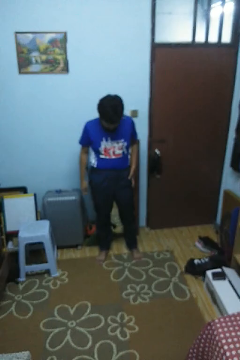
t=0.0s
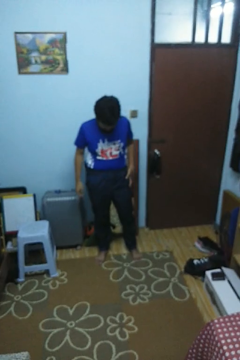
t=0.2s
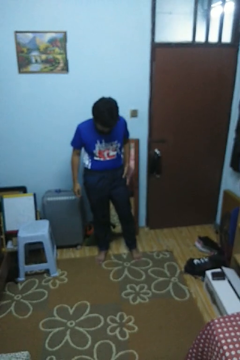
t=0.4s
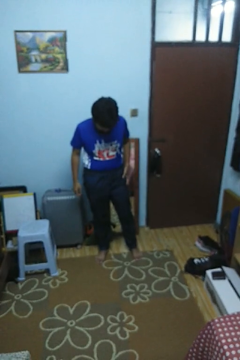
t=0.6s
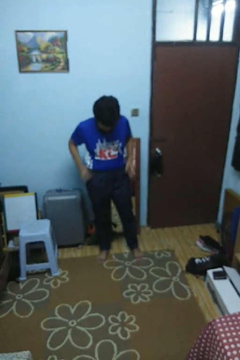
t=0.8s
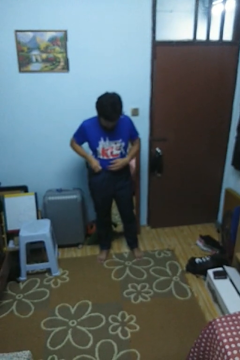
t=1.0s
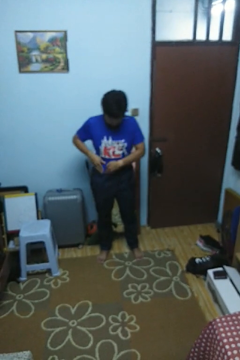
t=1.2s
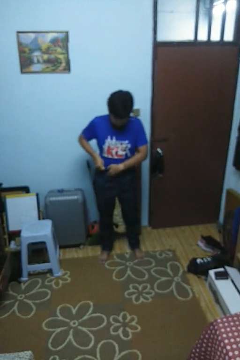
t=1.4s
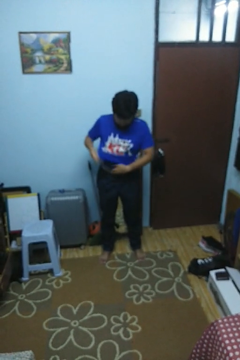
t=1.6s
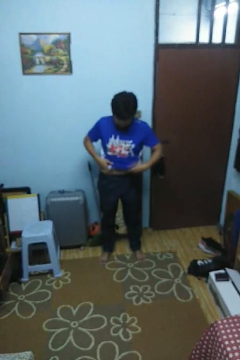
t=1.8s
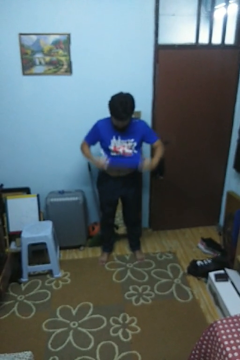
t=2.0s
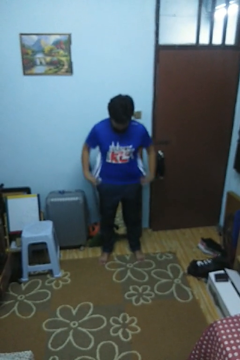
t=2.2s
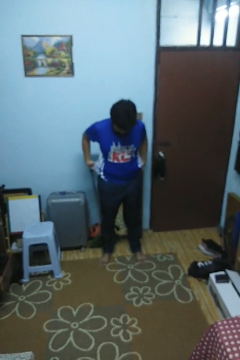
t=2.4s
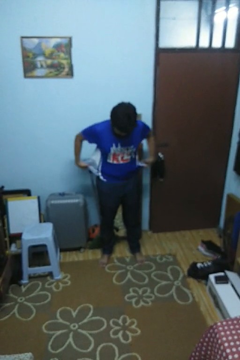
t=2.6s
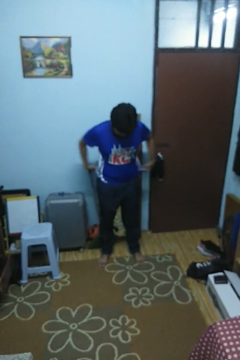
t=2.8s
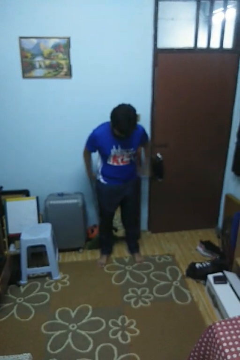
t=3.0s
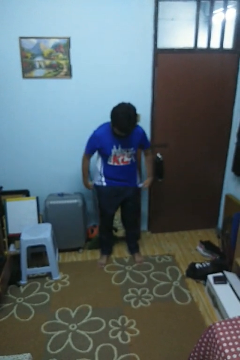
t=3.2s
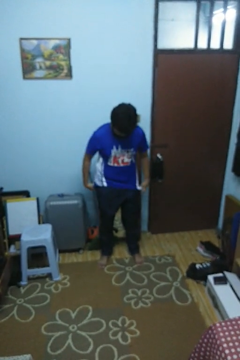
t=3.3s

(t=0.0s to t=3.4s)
person untucks shirt

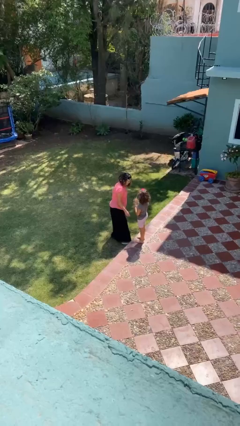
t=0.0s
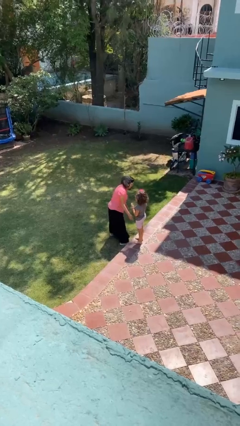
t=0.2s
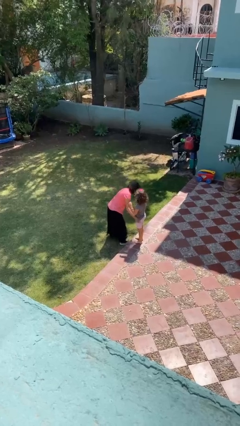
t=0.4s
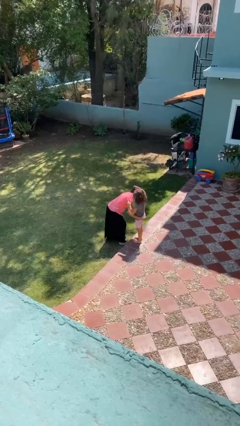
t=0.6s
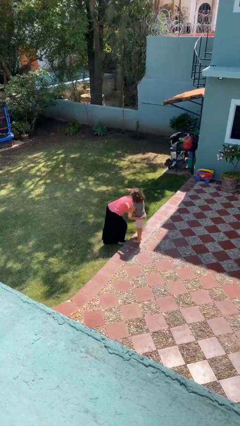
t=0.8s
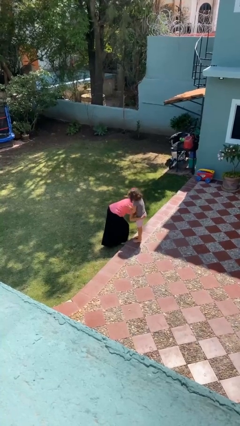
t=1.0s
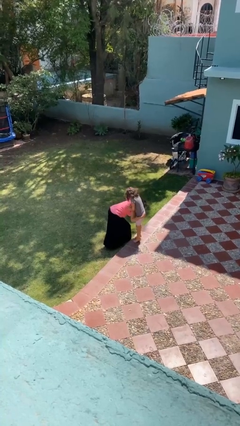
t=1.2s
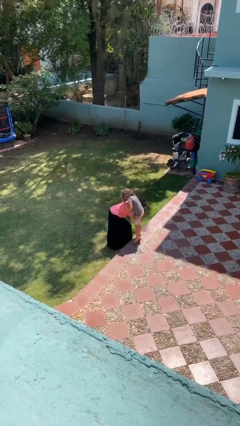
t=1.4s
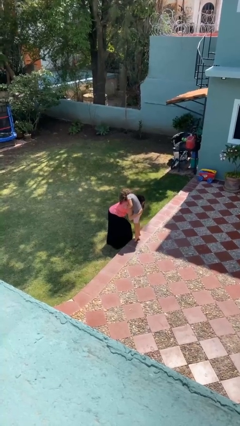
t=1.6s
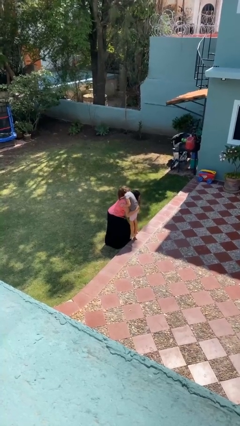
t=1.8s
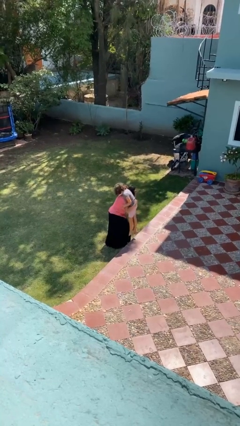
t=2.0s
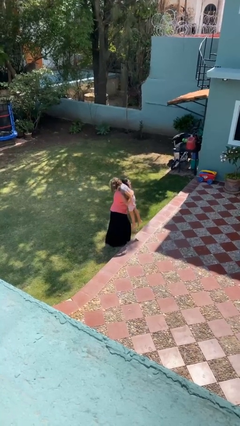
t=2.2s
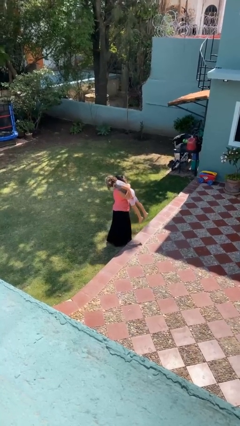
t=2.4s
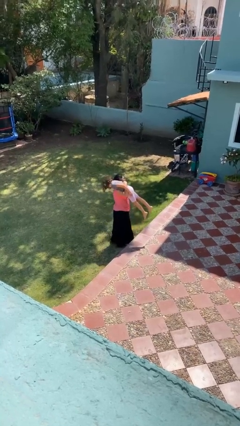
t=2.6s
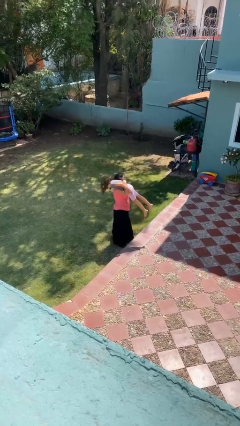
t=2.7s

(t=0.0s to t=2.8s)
person carries person over shoulder

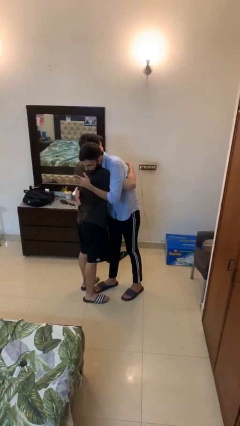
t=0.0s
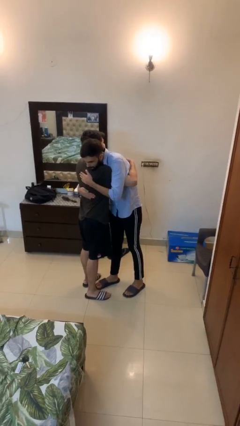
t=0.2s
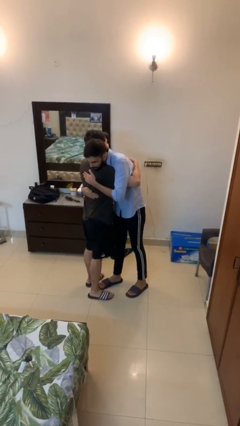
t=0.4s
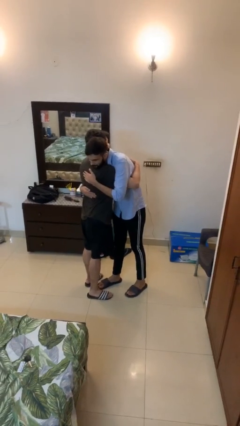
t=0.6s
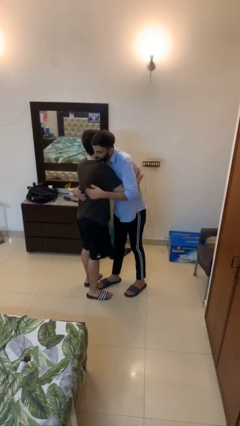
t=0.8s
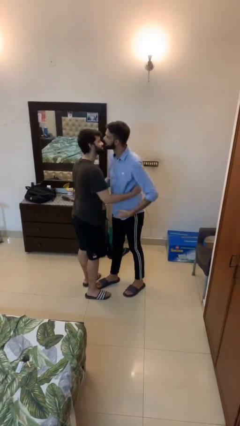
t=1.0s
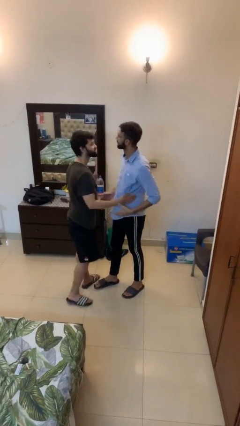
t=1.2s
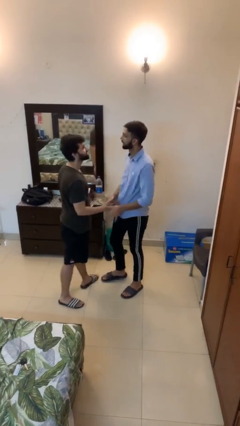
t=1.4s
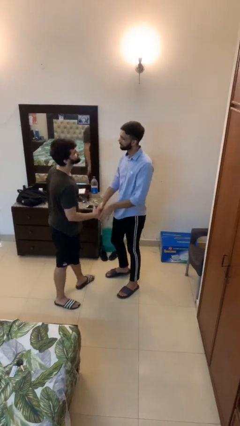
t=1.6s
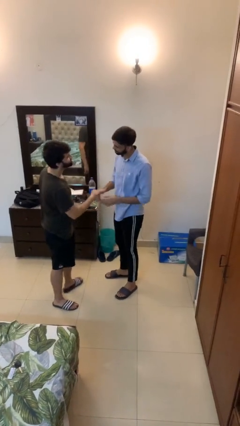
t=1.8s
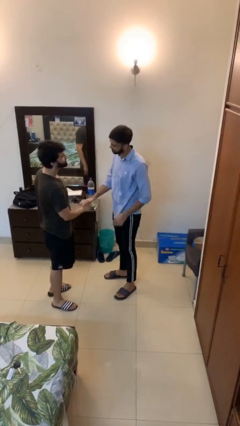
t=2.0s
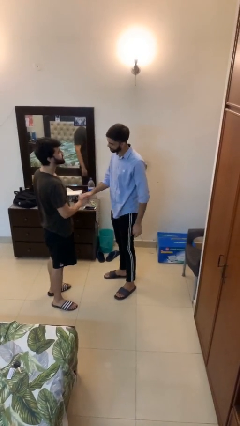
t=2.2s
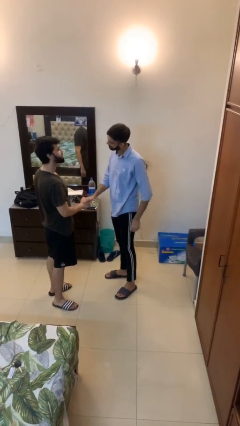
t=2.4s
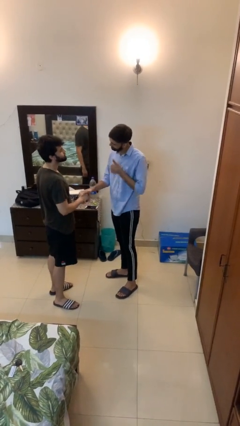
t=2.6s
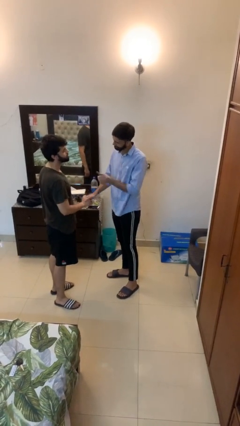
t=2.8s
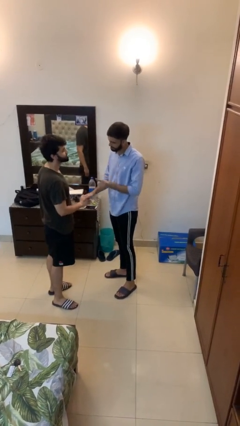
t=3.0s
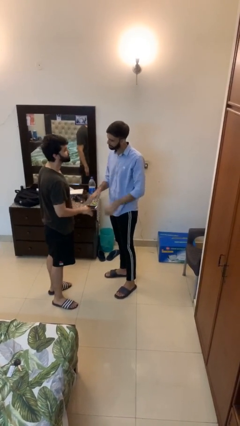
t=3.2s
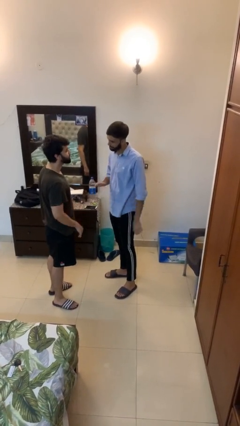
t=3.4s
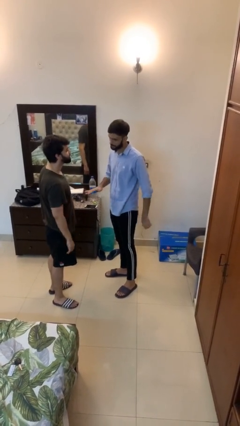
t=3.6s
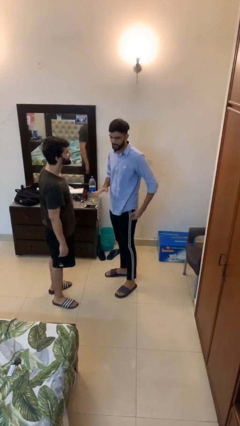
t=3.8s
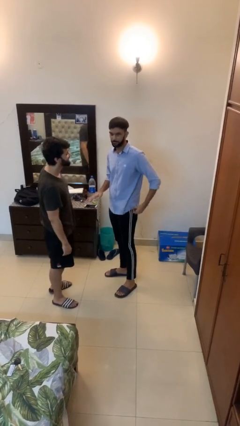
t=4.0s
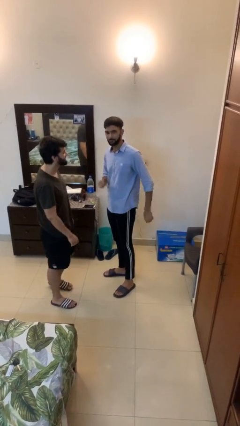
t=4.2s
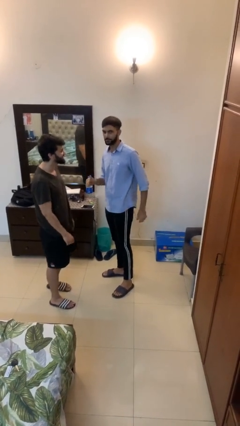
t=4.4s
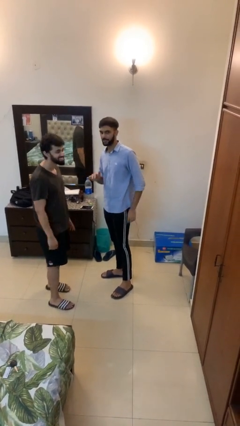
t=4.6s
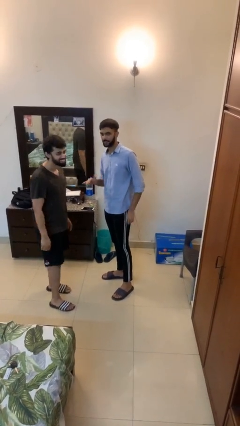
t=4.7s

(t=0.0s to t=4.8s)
person talks to person

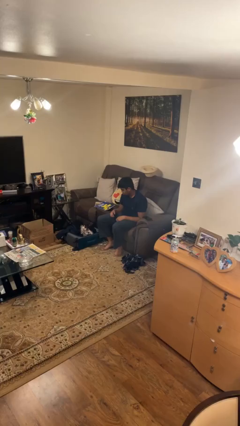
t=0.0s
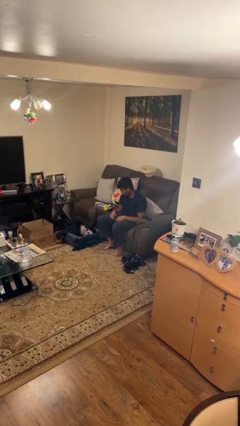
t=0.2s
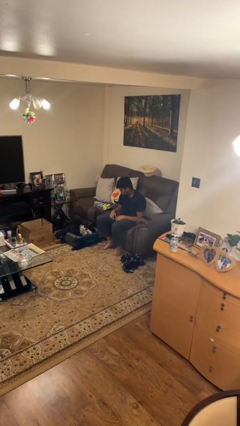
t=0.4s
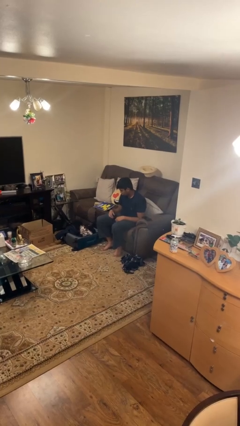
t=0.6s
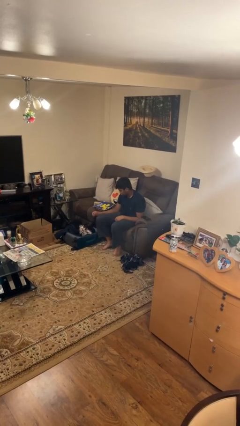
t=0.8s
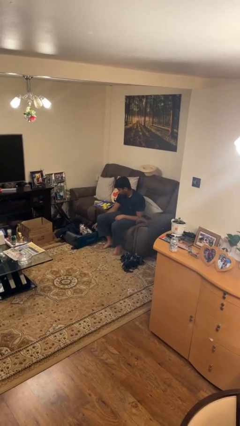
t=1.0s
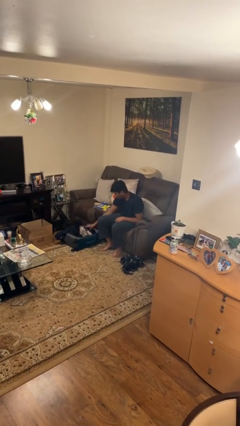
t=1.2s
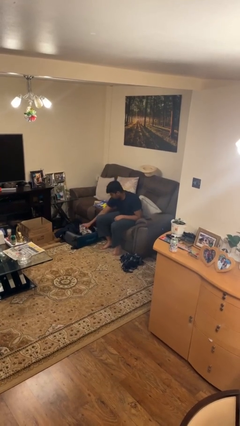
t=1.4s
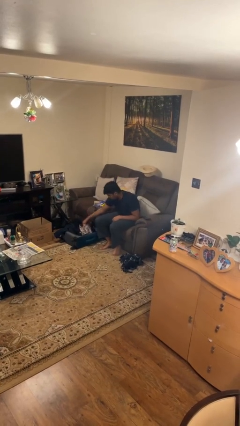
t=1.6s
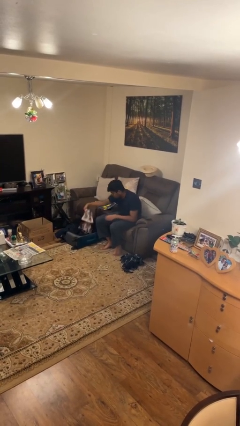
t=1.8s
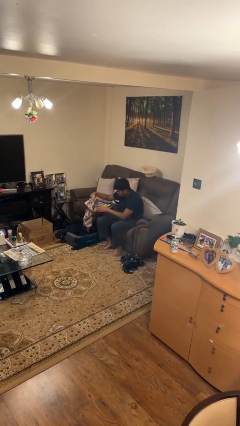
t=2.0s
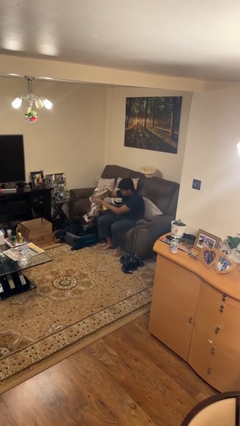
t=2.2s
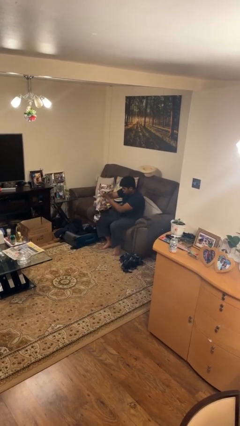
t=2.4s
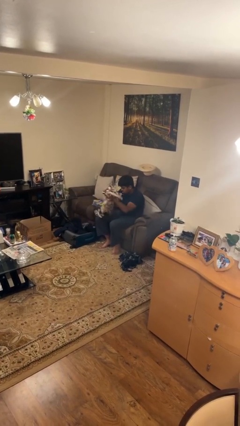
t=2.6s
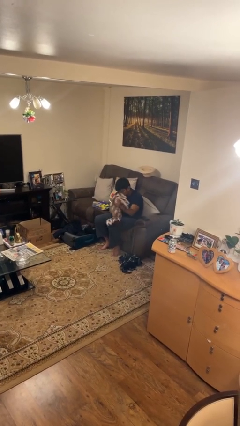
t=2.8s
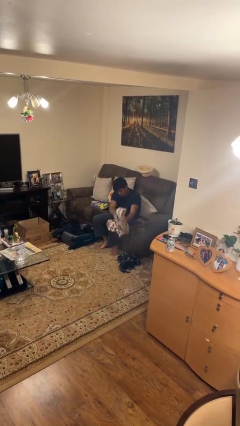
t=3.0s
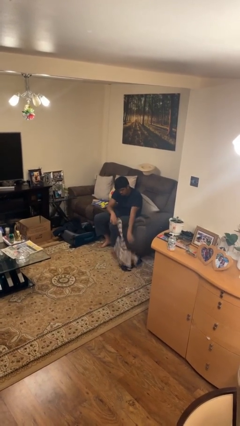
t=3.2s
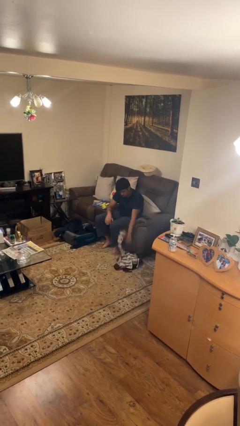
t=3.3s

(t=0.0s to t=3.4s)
person unloads clothes from suitcase

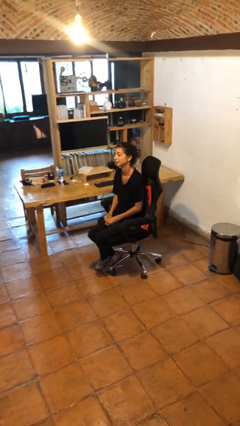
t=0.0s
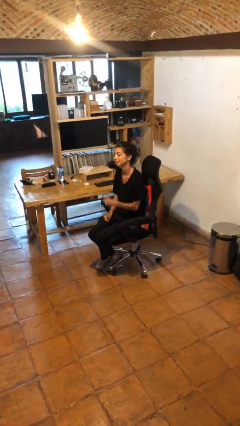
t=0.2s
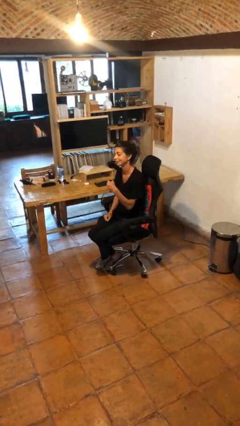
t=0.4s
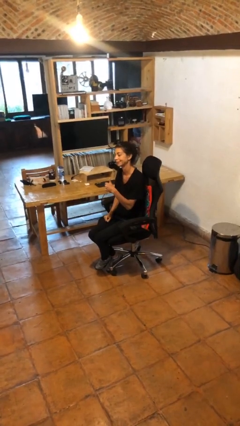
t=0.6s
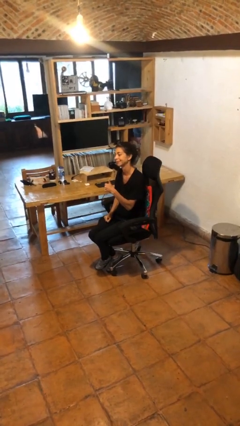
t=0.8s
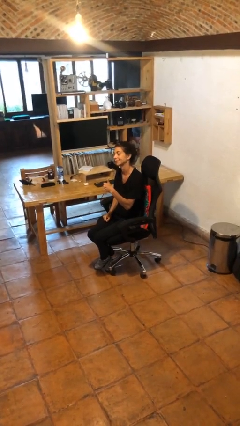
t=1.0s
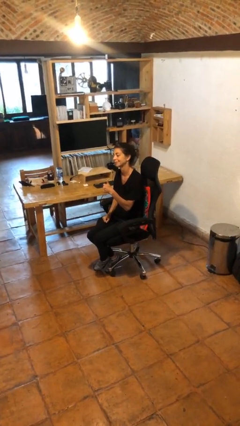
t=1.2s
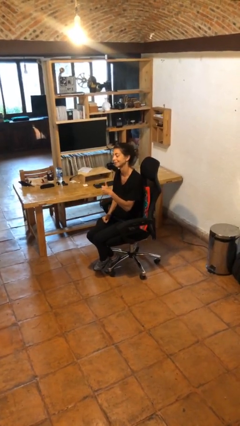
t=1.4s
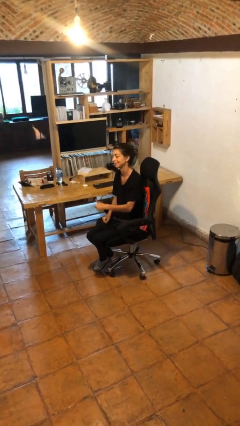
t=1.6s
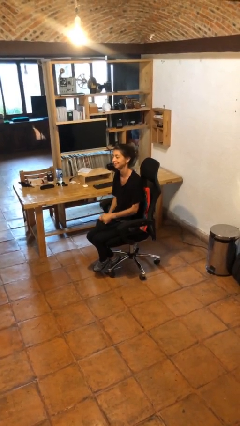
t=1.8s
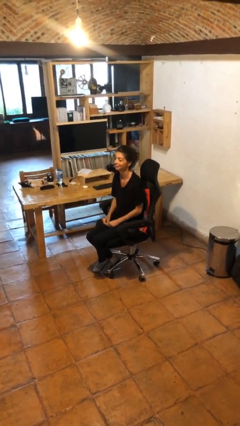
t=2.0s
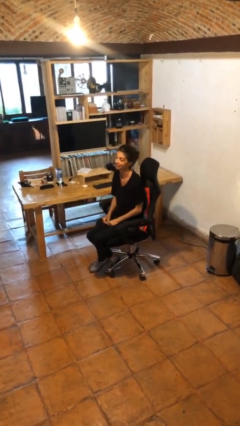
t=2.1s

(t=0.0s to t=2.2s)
person gestures thumbs up

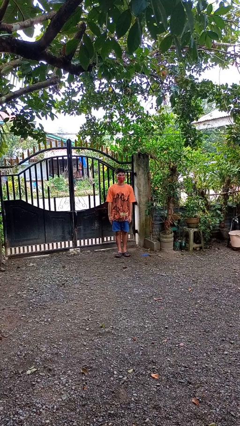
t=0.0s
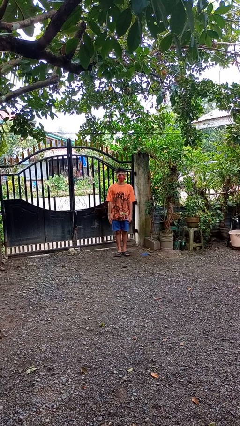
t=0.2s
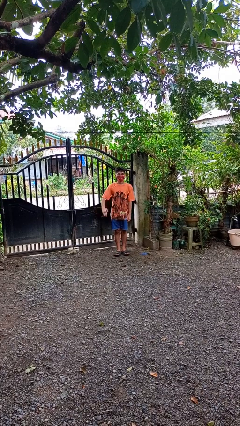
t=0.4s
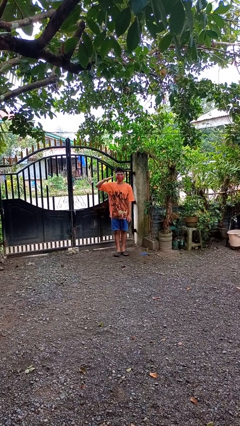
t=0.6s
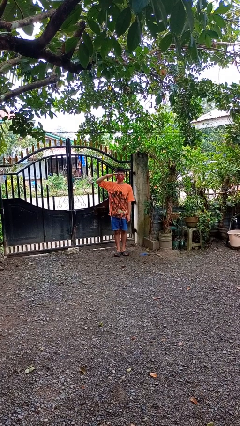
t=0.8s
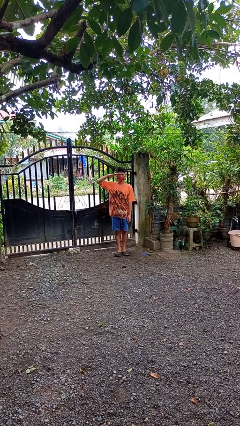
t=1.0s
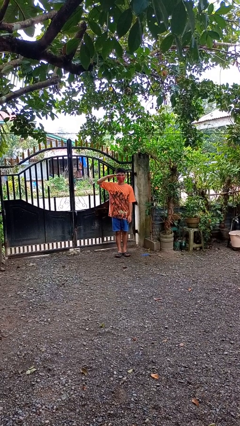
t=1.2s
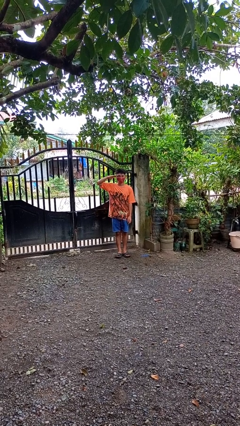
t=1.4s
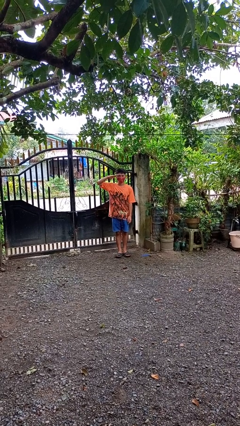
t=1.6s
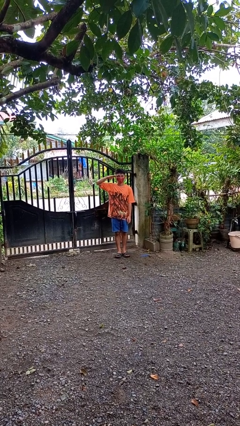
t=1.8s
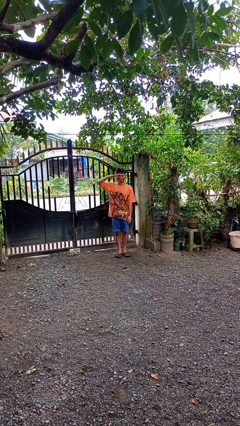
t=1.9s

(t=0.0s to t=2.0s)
person salutes
